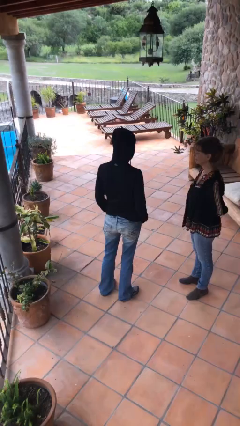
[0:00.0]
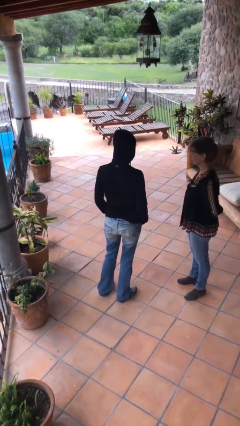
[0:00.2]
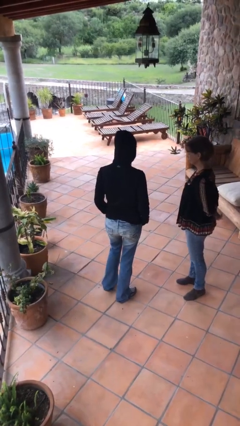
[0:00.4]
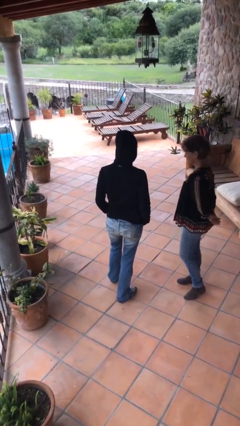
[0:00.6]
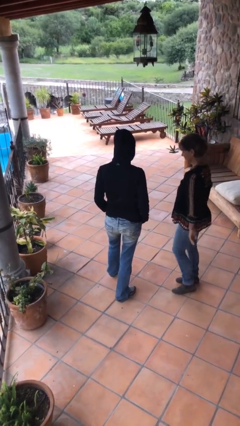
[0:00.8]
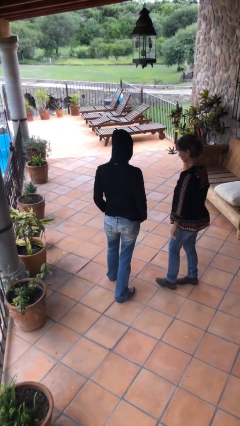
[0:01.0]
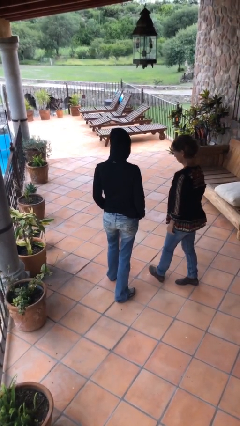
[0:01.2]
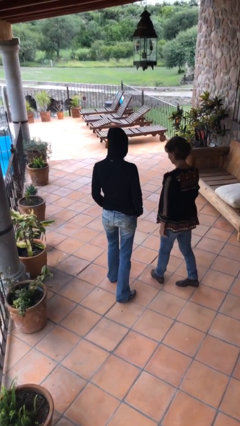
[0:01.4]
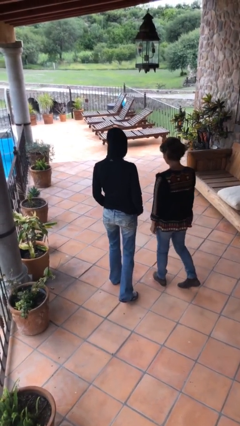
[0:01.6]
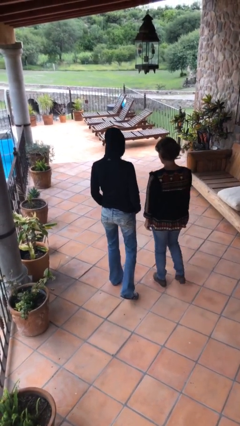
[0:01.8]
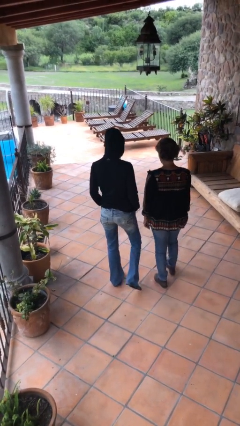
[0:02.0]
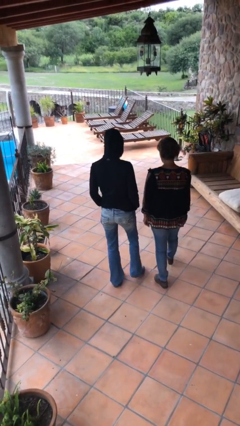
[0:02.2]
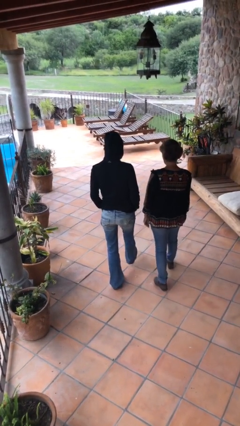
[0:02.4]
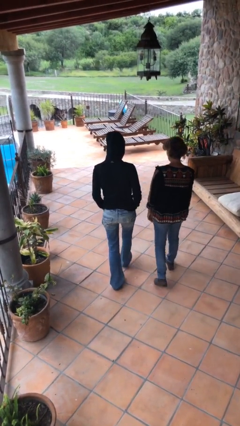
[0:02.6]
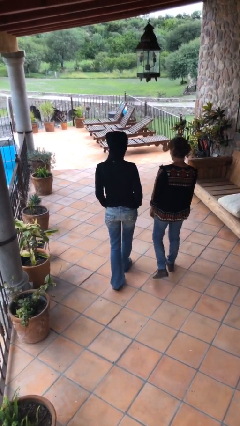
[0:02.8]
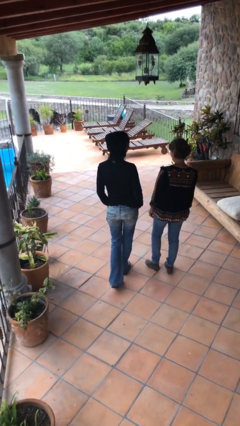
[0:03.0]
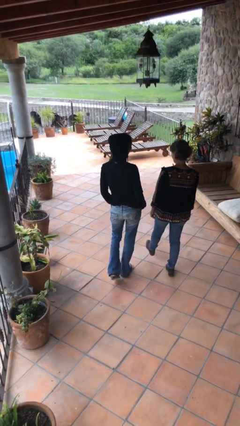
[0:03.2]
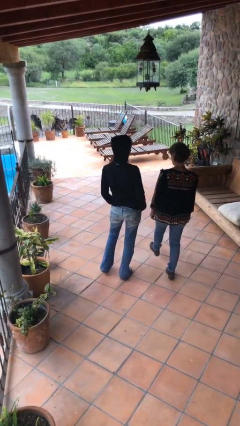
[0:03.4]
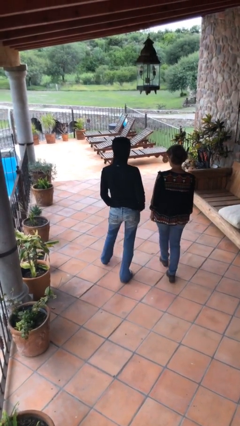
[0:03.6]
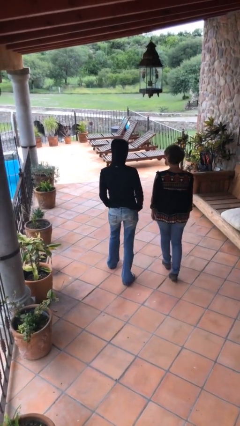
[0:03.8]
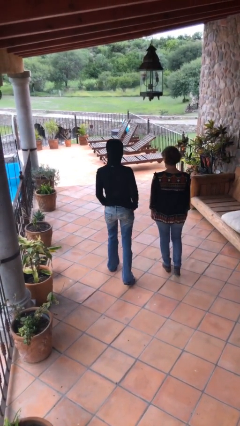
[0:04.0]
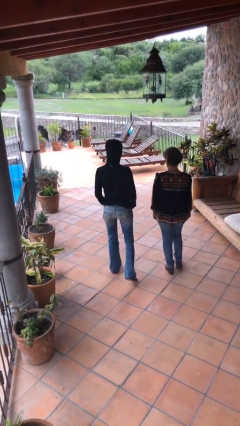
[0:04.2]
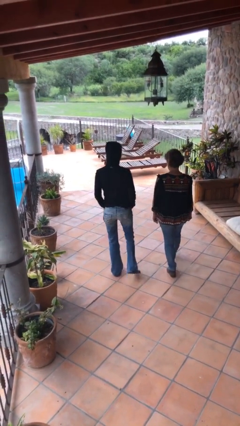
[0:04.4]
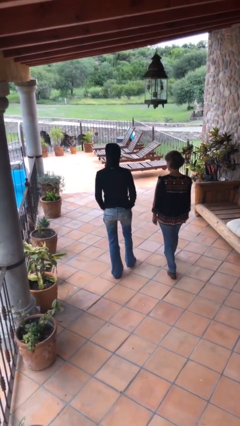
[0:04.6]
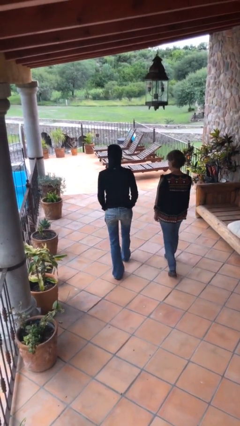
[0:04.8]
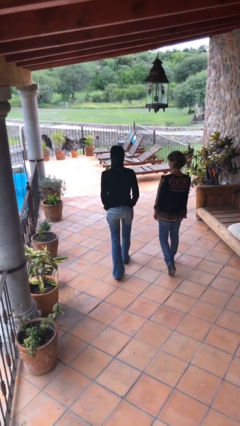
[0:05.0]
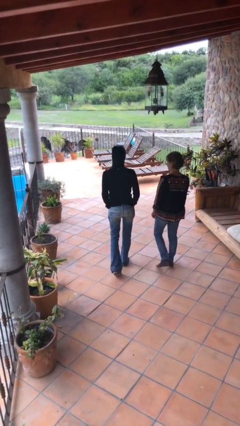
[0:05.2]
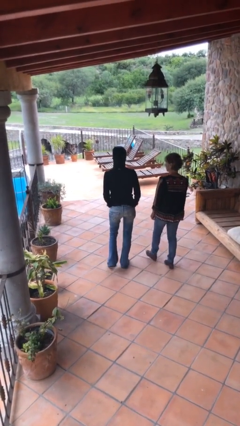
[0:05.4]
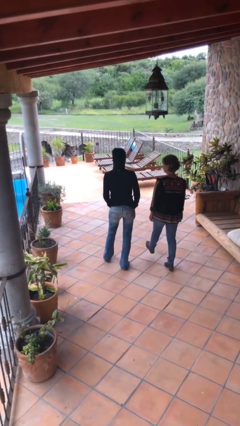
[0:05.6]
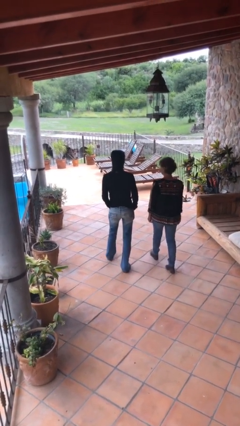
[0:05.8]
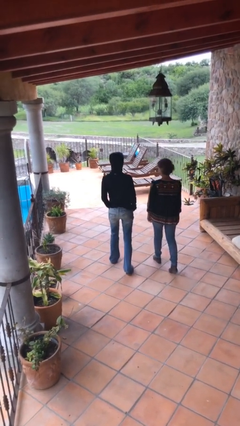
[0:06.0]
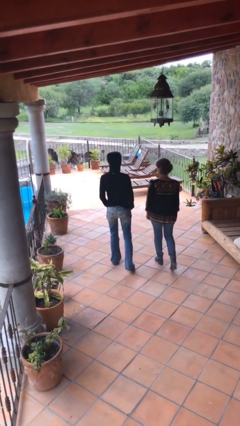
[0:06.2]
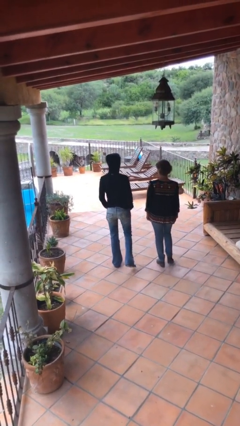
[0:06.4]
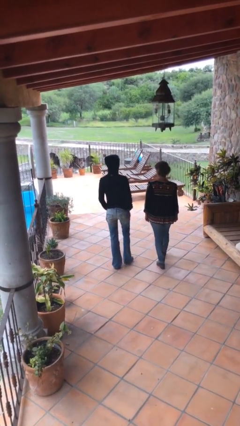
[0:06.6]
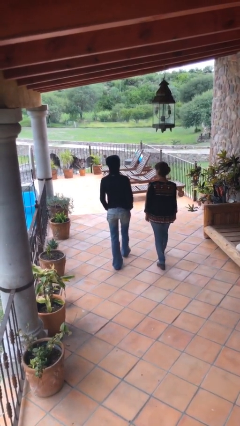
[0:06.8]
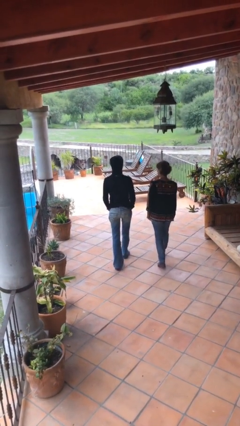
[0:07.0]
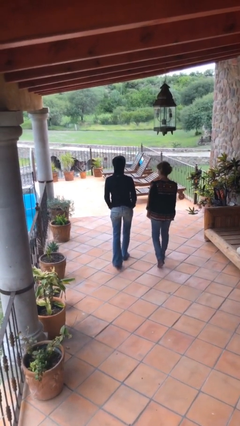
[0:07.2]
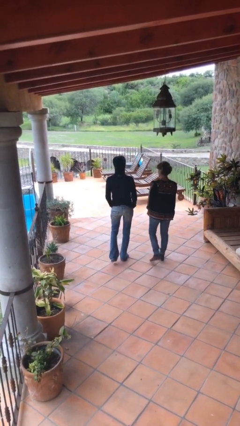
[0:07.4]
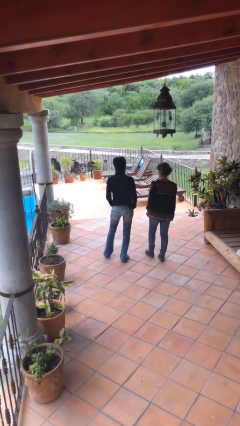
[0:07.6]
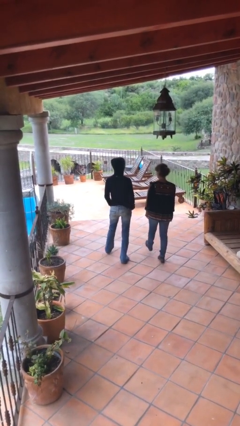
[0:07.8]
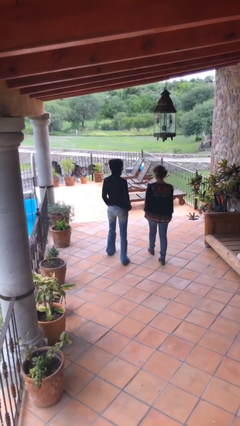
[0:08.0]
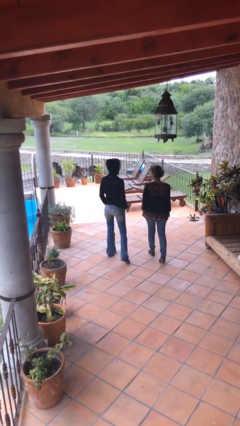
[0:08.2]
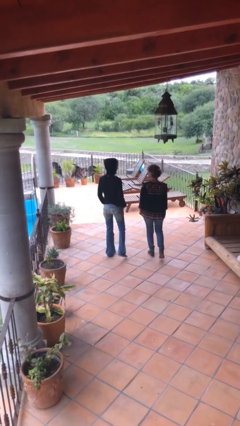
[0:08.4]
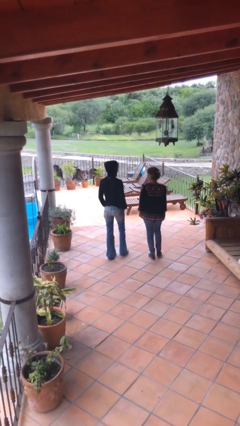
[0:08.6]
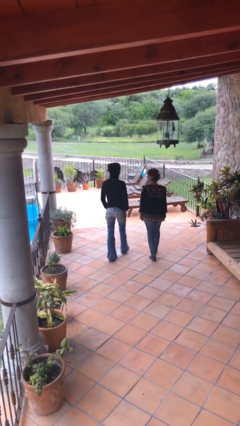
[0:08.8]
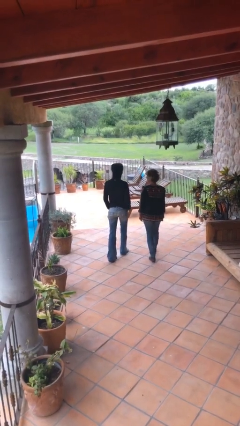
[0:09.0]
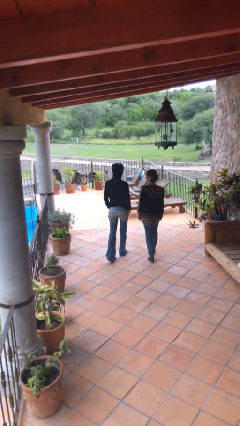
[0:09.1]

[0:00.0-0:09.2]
person talks to person

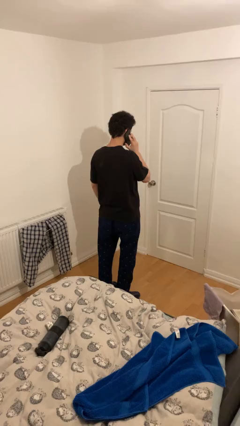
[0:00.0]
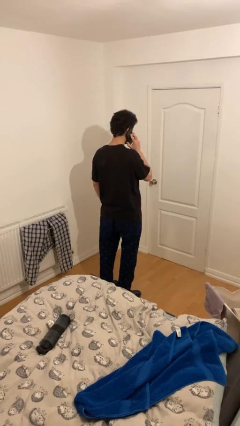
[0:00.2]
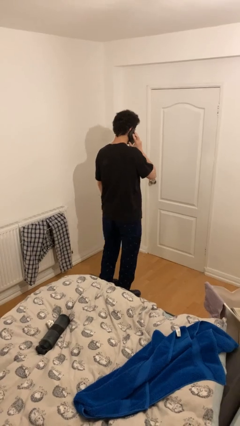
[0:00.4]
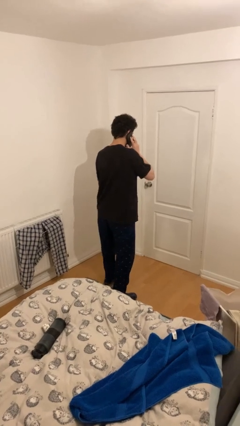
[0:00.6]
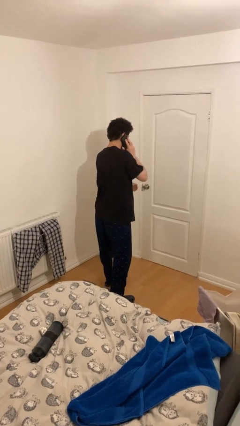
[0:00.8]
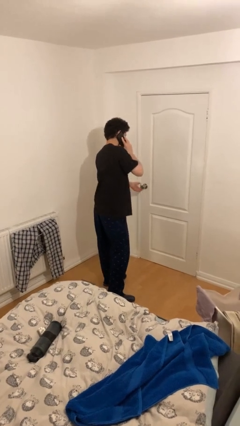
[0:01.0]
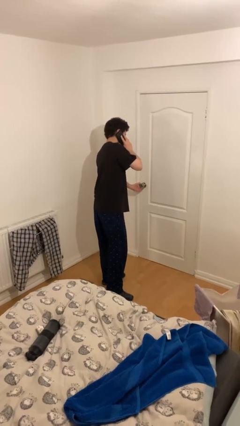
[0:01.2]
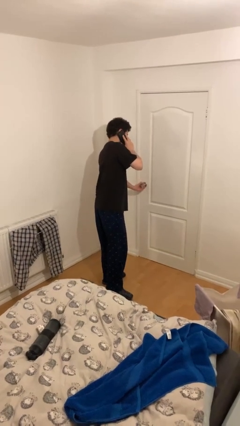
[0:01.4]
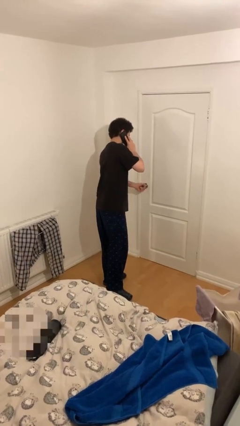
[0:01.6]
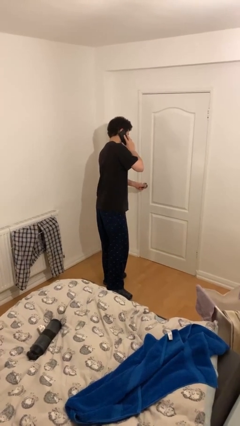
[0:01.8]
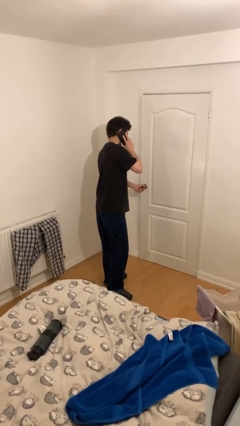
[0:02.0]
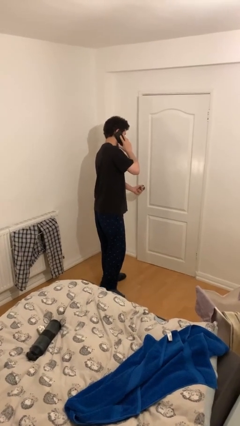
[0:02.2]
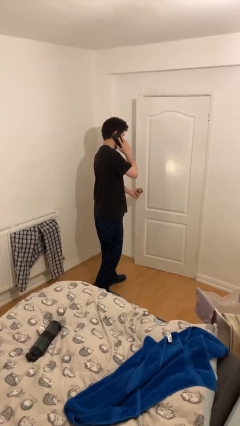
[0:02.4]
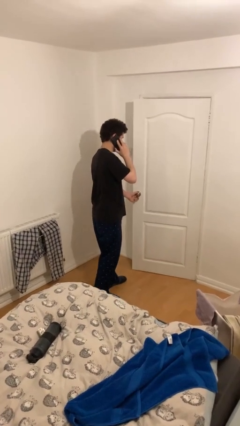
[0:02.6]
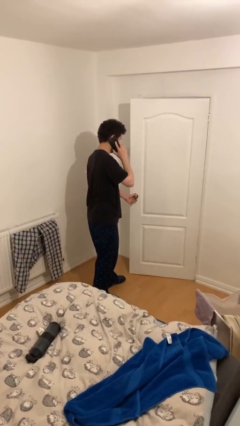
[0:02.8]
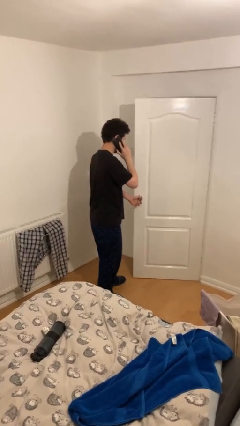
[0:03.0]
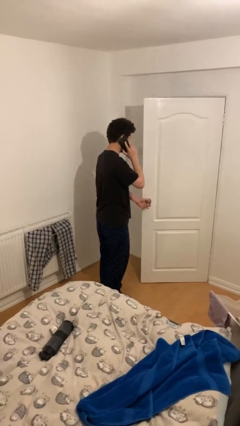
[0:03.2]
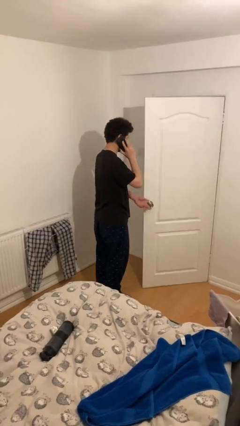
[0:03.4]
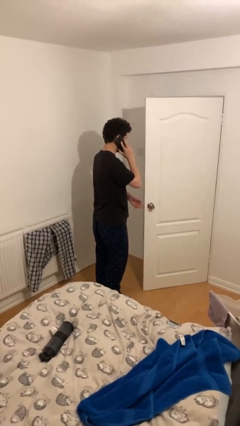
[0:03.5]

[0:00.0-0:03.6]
person opens facility door

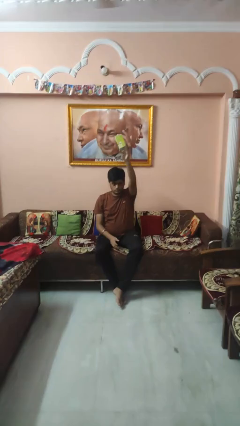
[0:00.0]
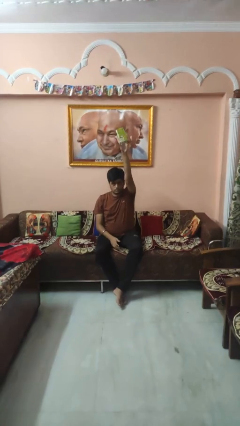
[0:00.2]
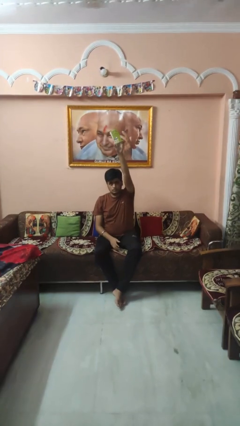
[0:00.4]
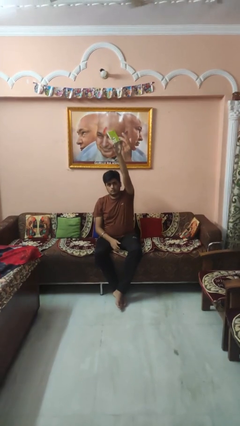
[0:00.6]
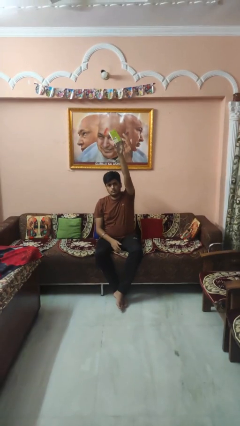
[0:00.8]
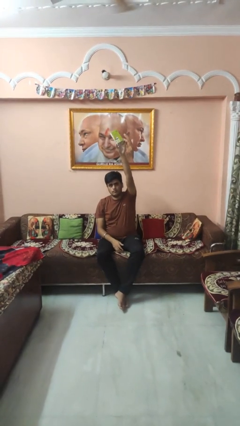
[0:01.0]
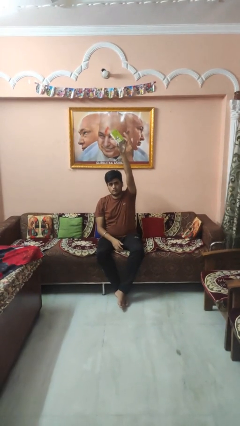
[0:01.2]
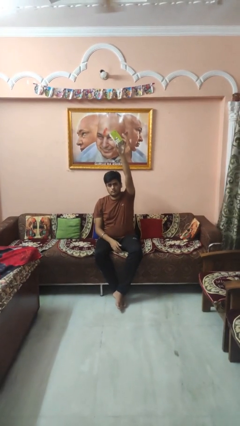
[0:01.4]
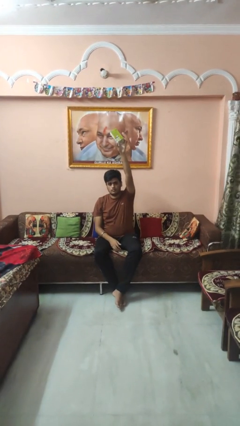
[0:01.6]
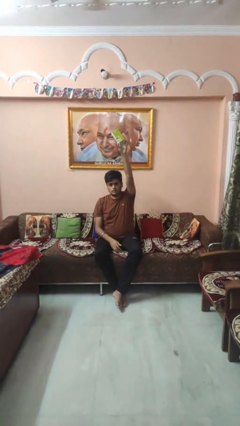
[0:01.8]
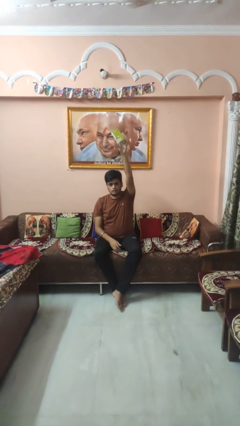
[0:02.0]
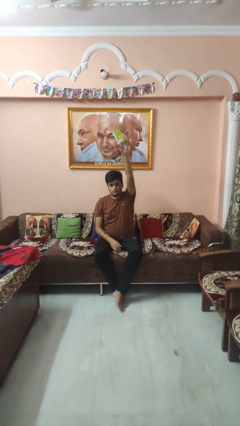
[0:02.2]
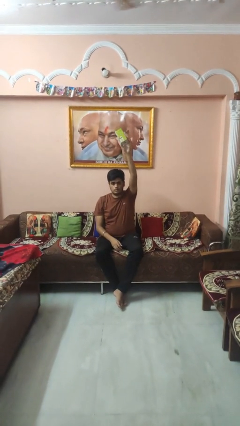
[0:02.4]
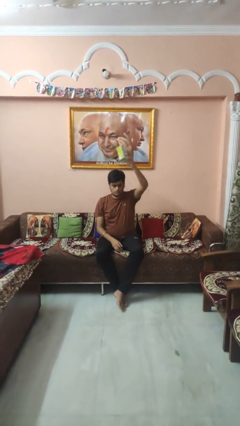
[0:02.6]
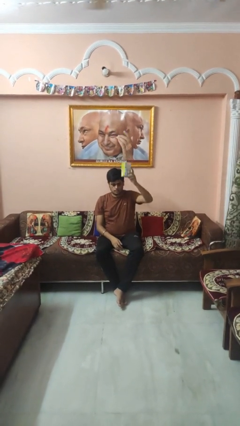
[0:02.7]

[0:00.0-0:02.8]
person holds object above head

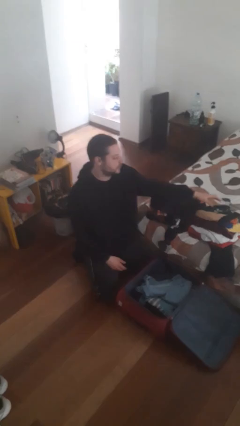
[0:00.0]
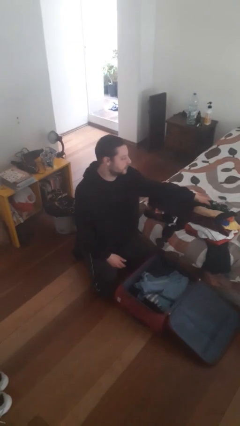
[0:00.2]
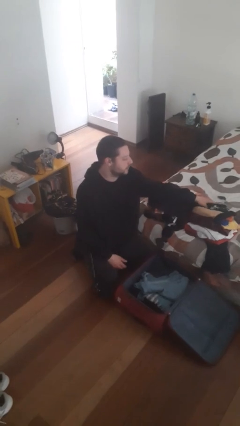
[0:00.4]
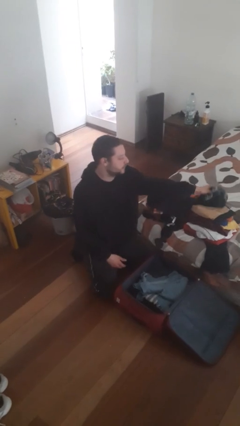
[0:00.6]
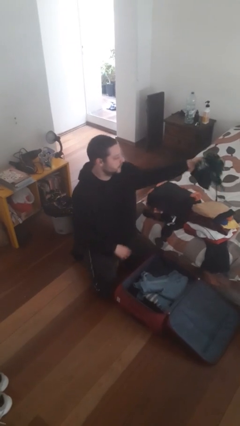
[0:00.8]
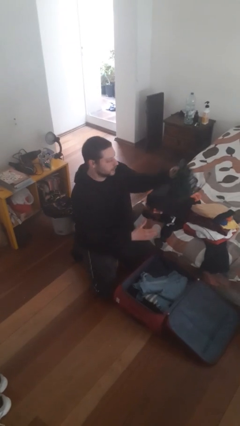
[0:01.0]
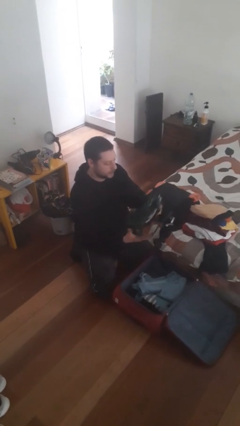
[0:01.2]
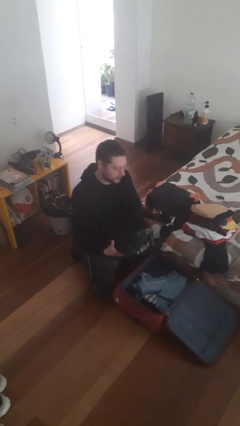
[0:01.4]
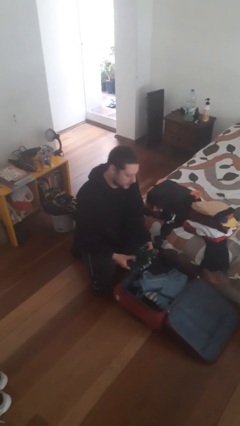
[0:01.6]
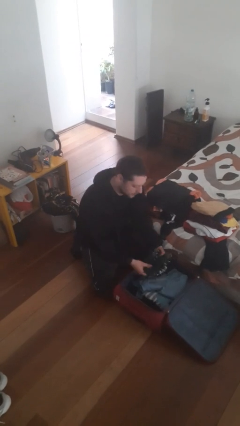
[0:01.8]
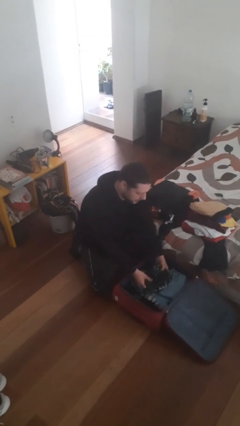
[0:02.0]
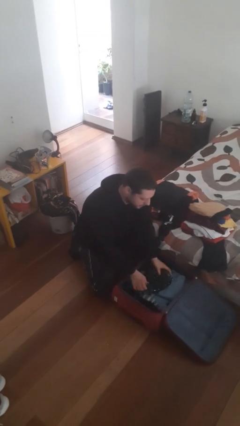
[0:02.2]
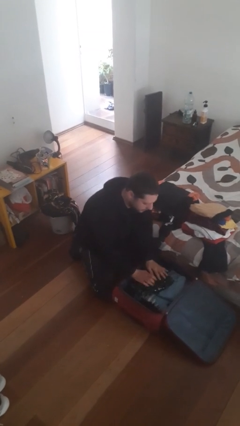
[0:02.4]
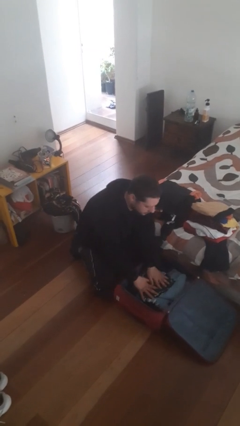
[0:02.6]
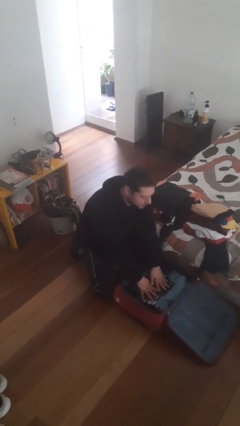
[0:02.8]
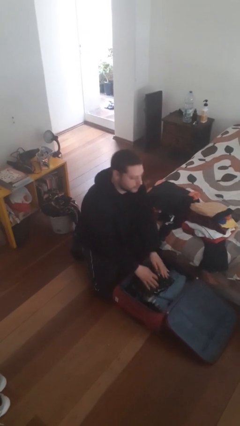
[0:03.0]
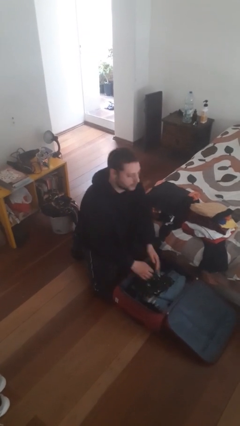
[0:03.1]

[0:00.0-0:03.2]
person loads clothes into suitcase
